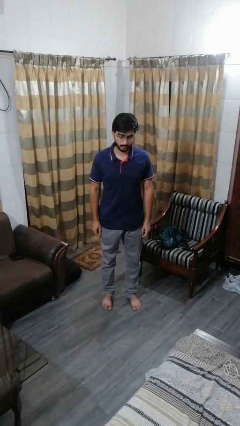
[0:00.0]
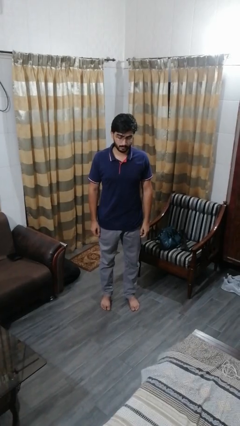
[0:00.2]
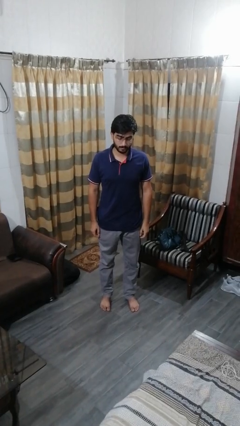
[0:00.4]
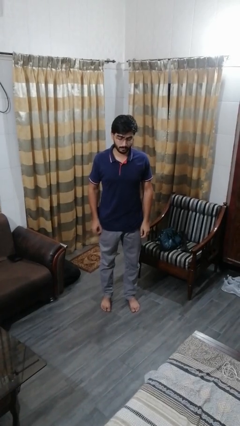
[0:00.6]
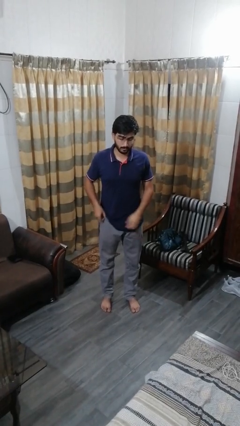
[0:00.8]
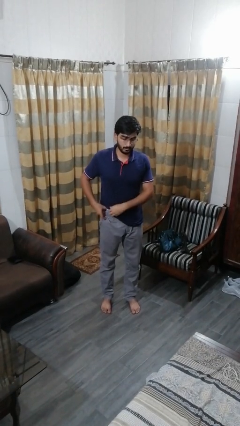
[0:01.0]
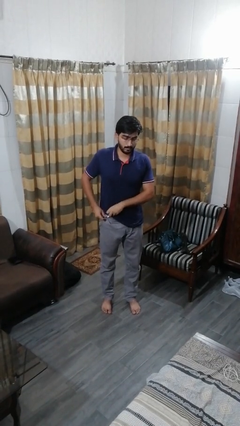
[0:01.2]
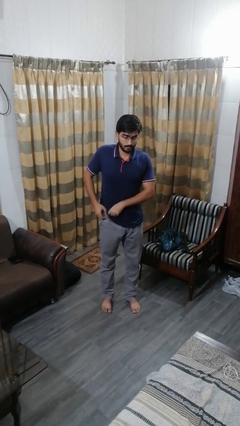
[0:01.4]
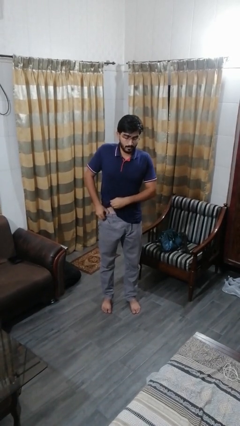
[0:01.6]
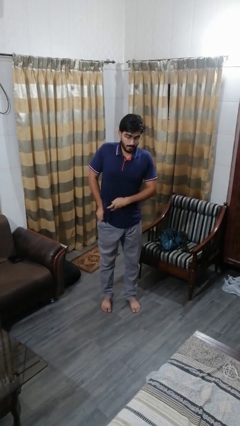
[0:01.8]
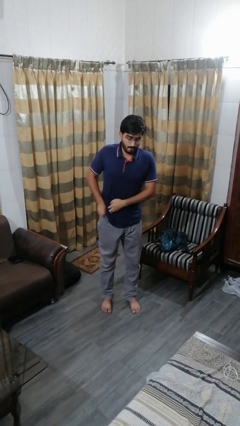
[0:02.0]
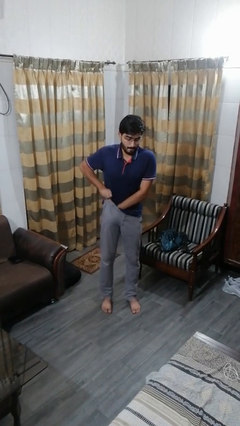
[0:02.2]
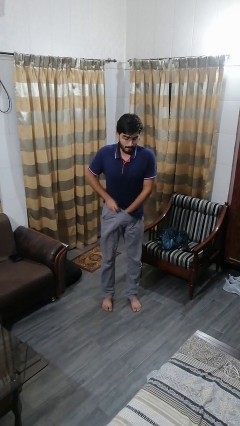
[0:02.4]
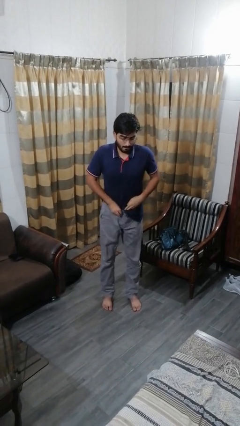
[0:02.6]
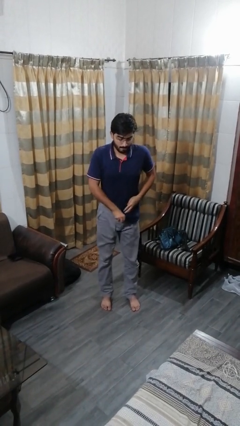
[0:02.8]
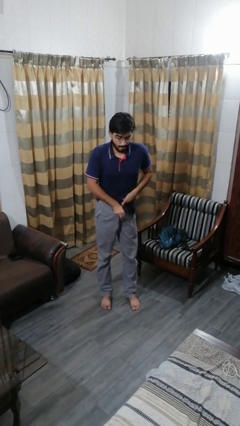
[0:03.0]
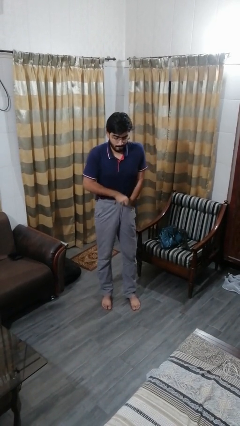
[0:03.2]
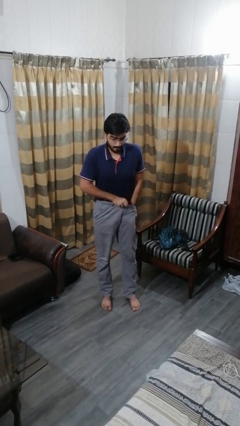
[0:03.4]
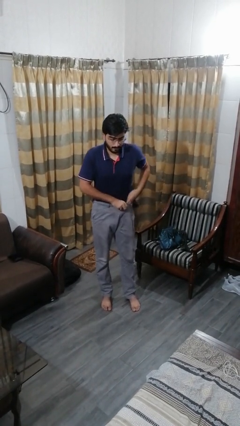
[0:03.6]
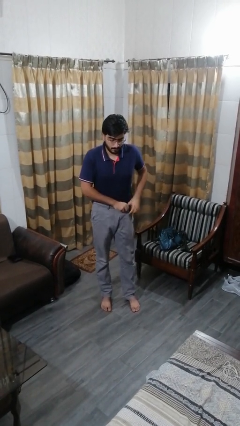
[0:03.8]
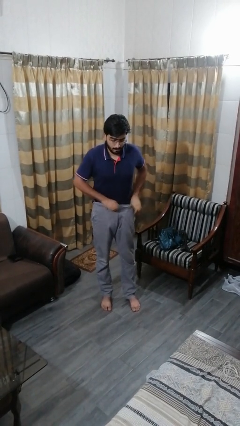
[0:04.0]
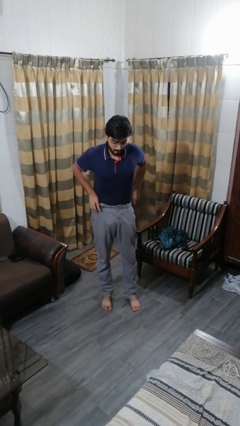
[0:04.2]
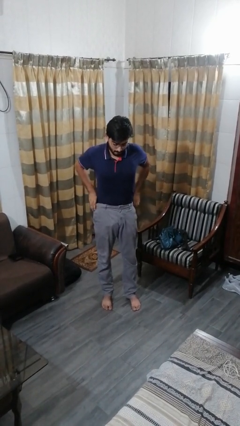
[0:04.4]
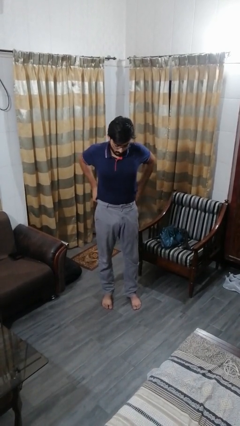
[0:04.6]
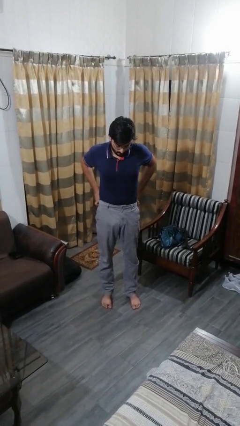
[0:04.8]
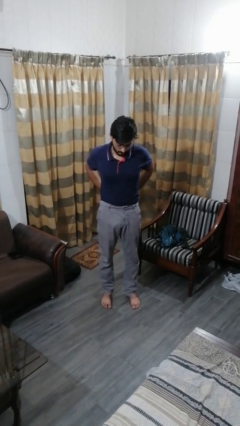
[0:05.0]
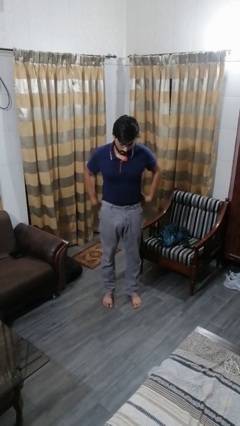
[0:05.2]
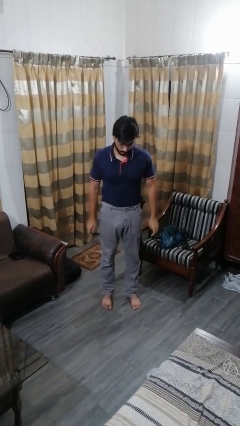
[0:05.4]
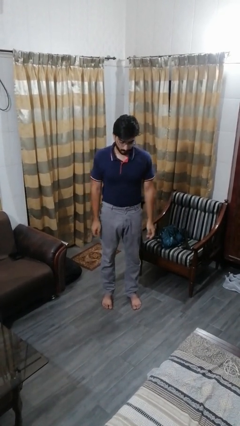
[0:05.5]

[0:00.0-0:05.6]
person tucks in shirt

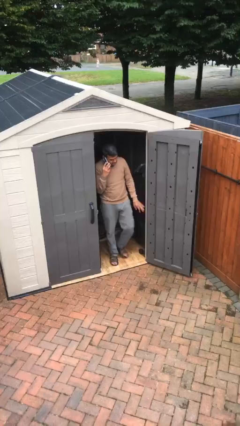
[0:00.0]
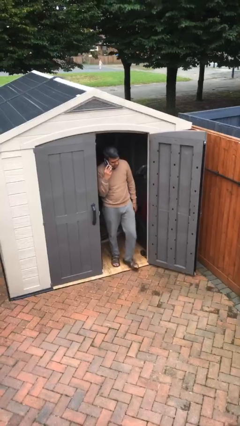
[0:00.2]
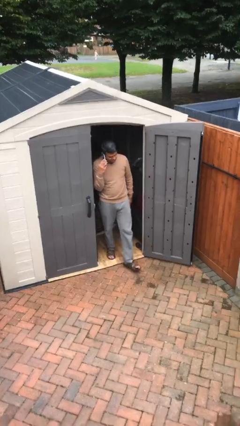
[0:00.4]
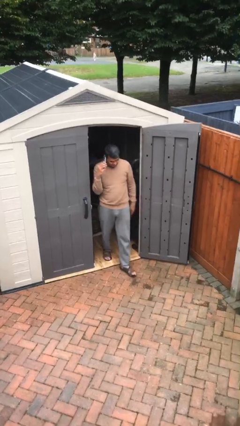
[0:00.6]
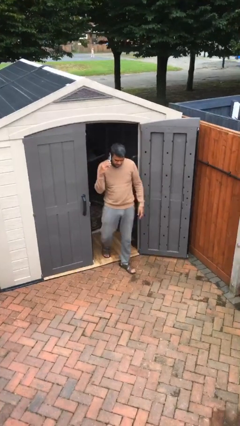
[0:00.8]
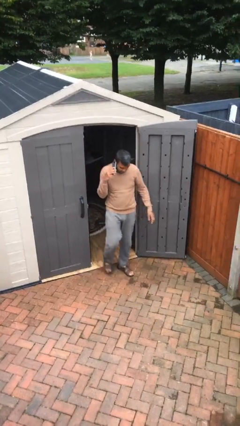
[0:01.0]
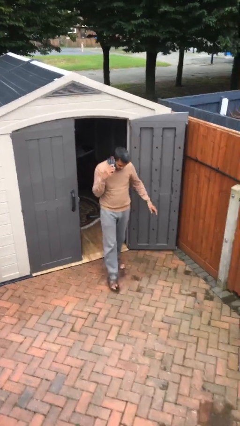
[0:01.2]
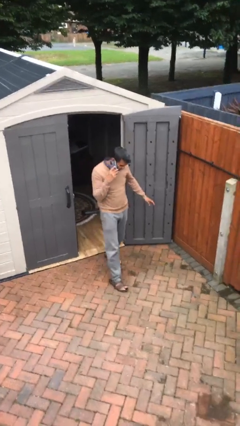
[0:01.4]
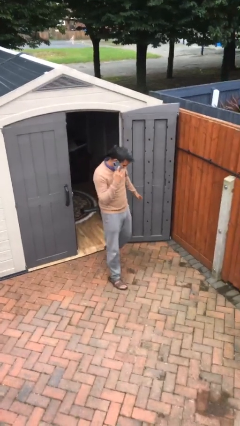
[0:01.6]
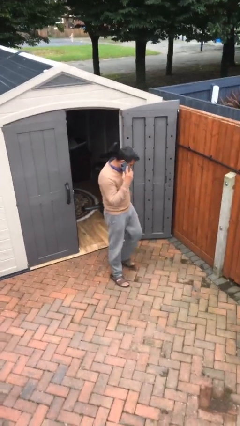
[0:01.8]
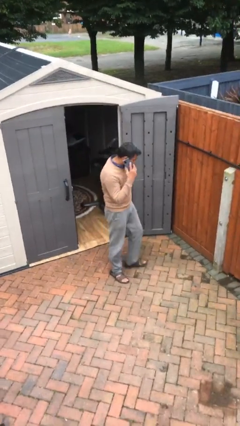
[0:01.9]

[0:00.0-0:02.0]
person enters scene through structure

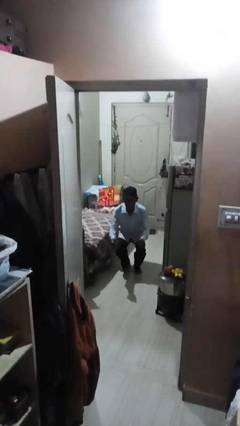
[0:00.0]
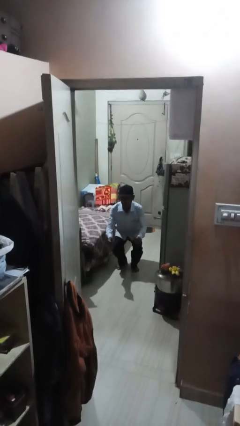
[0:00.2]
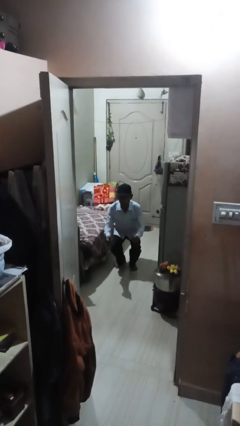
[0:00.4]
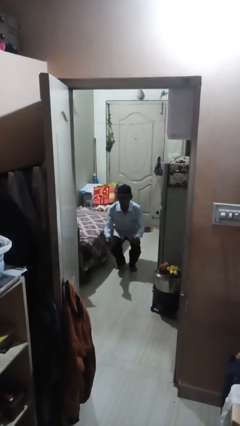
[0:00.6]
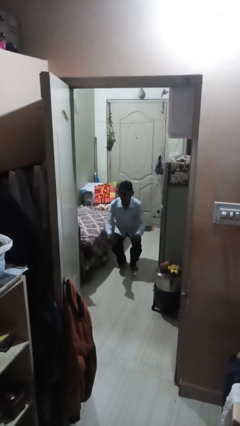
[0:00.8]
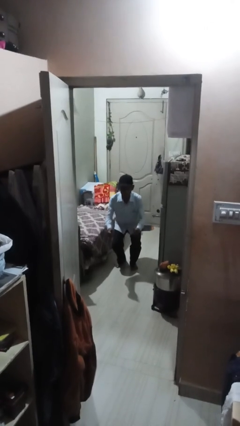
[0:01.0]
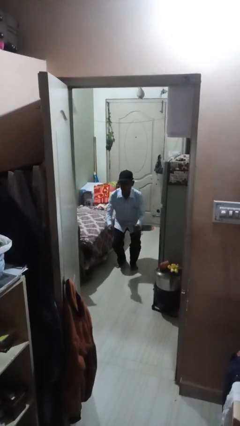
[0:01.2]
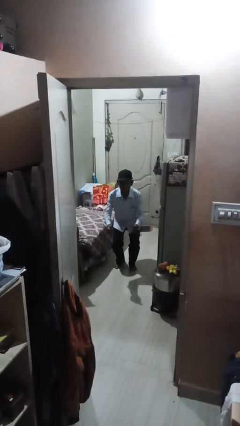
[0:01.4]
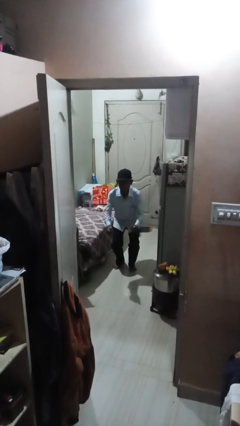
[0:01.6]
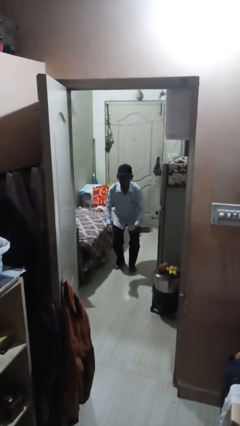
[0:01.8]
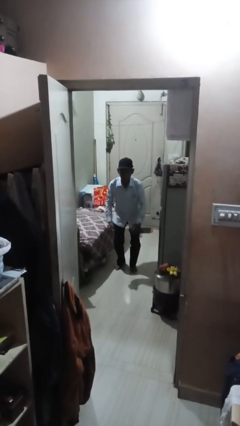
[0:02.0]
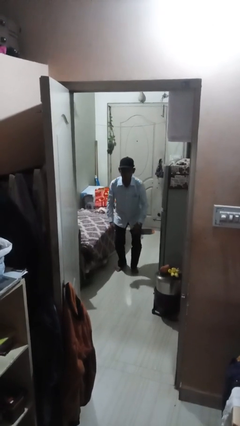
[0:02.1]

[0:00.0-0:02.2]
person stands up

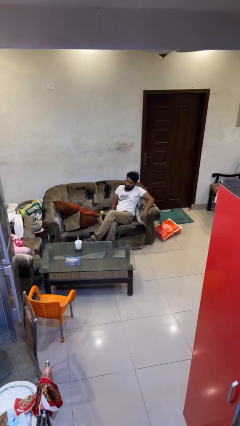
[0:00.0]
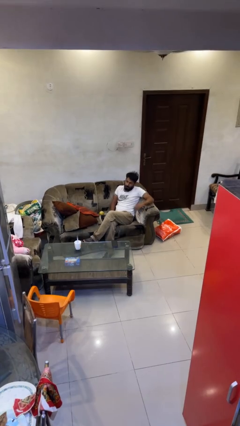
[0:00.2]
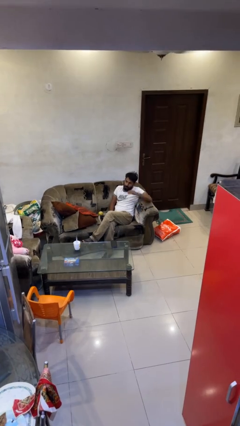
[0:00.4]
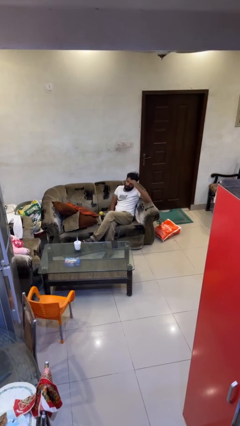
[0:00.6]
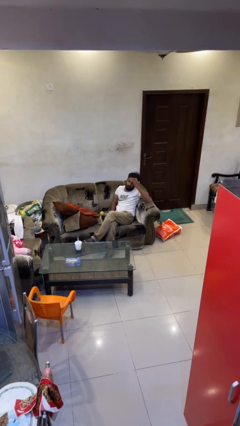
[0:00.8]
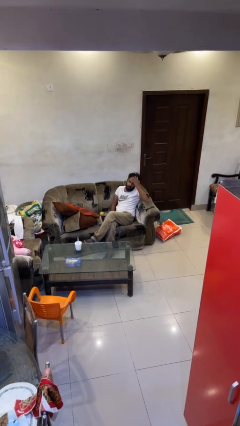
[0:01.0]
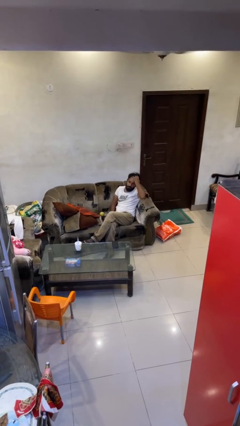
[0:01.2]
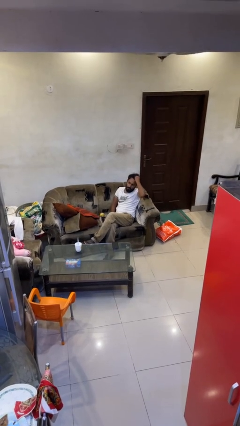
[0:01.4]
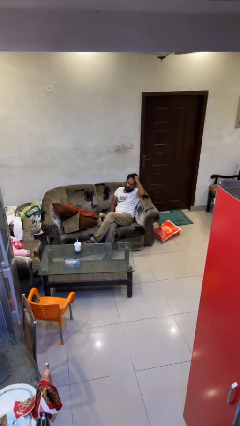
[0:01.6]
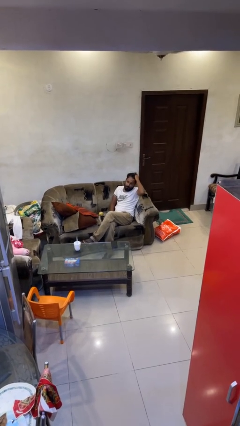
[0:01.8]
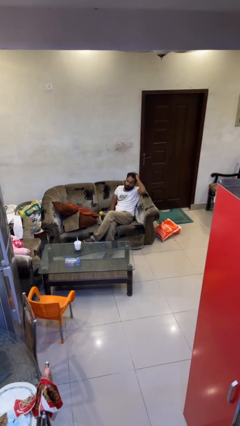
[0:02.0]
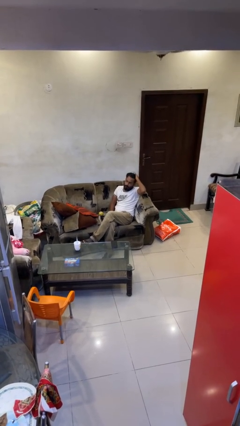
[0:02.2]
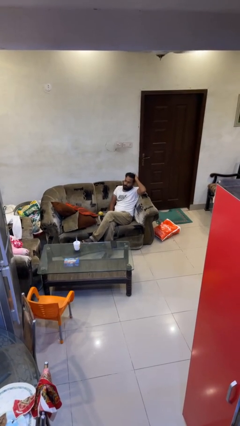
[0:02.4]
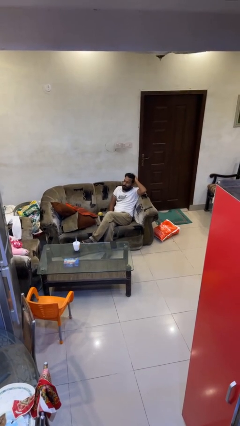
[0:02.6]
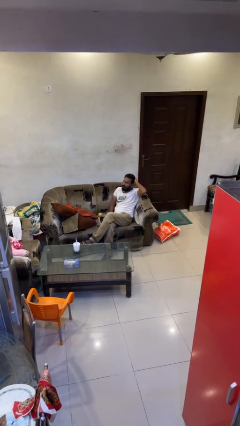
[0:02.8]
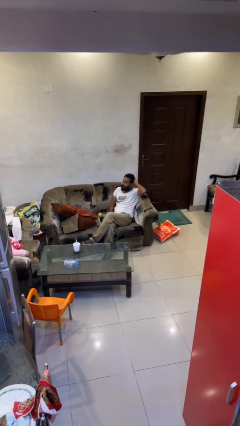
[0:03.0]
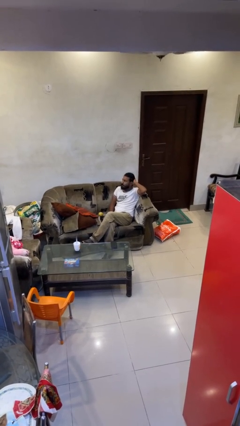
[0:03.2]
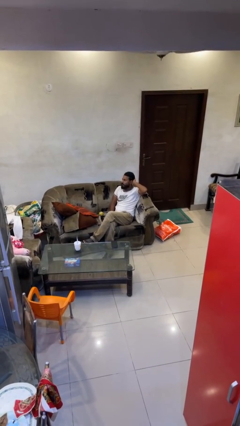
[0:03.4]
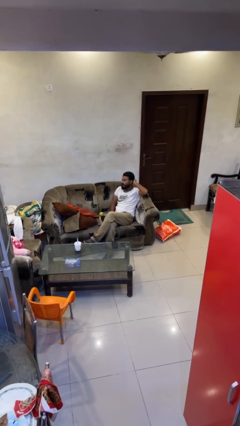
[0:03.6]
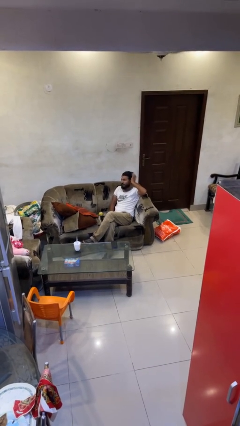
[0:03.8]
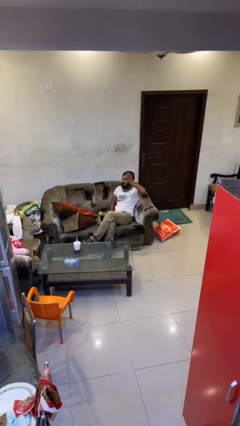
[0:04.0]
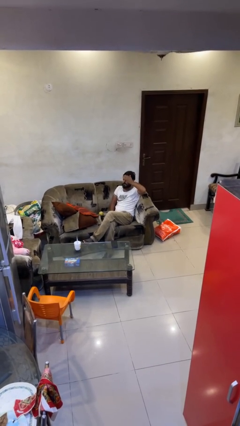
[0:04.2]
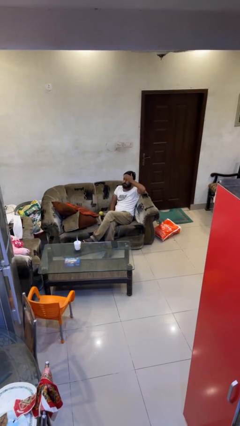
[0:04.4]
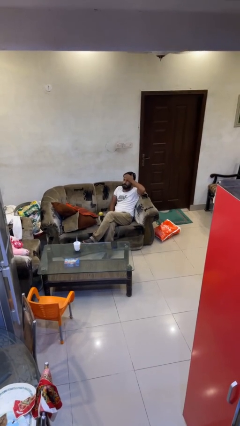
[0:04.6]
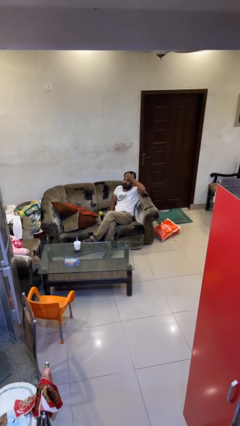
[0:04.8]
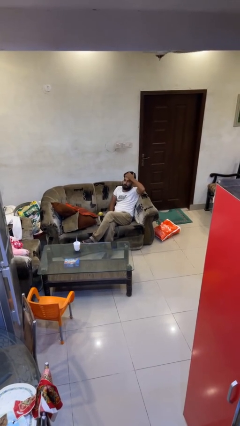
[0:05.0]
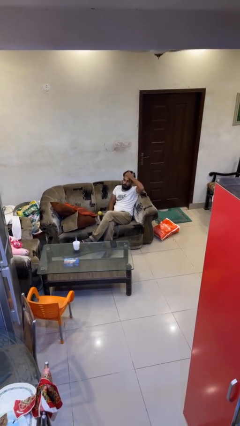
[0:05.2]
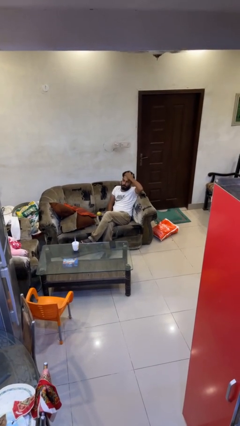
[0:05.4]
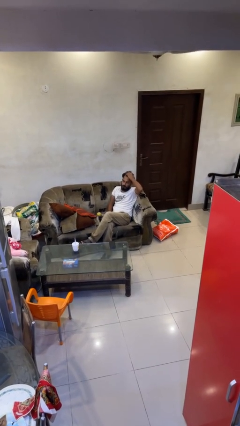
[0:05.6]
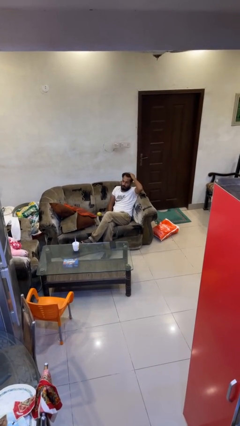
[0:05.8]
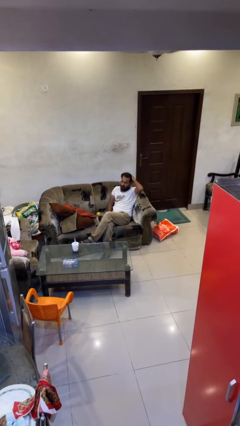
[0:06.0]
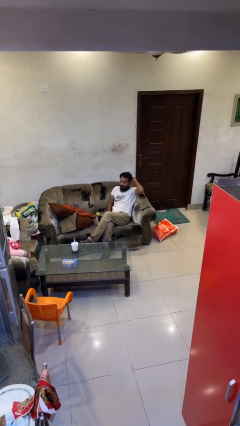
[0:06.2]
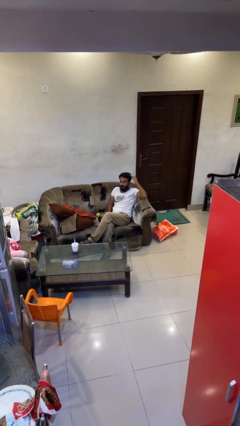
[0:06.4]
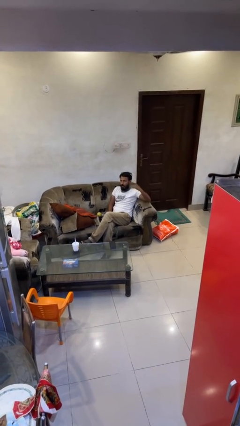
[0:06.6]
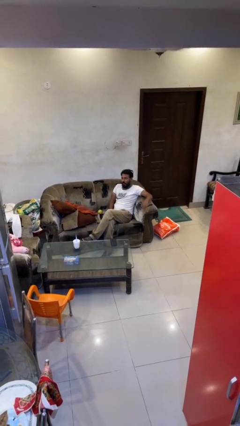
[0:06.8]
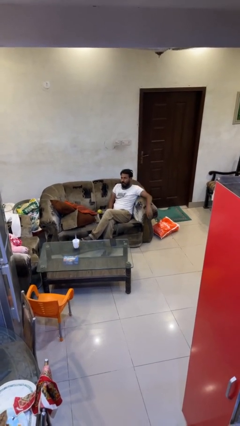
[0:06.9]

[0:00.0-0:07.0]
person strokes hair

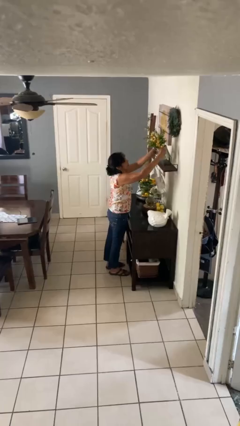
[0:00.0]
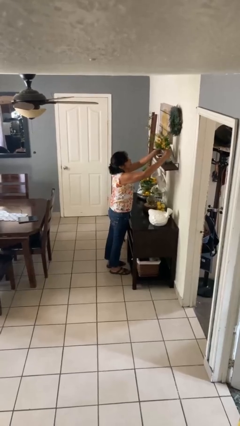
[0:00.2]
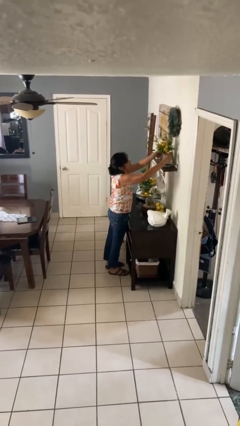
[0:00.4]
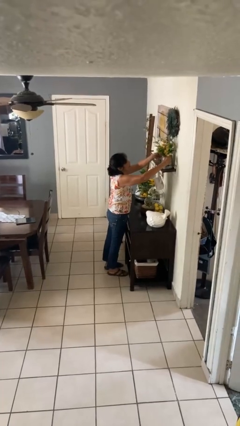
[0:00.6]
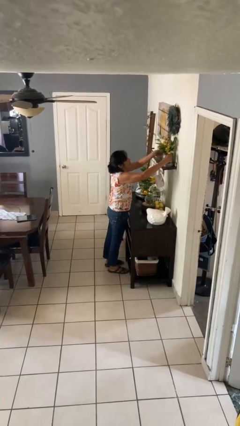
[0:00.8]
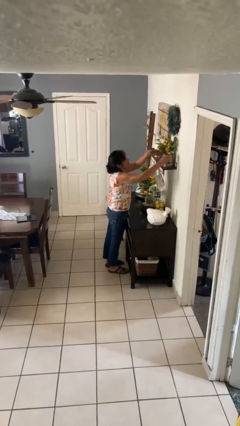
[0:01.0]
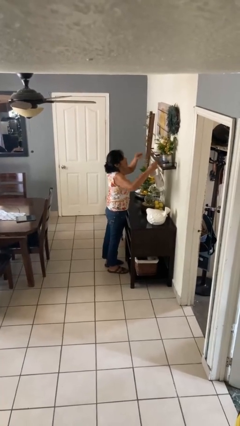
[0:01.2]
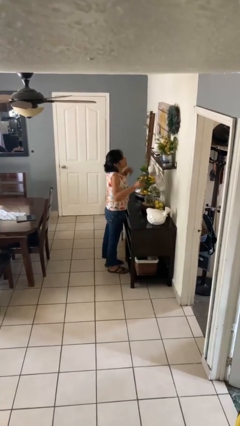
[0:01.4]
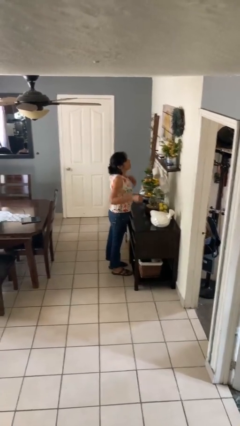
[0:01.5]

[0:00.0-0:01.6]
person puts down object on countertop
